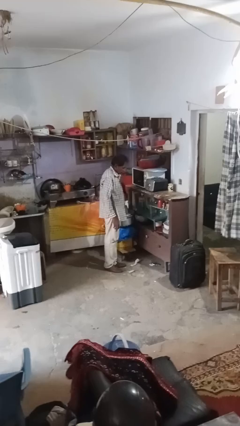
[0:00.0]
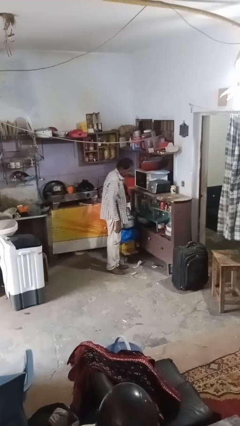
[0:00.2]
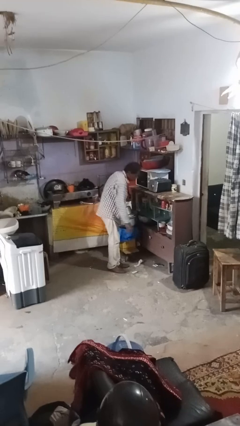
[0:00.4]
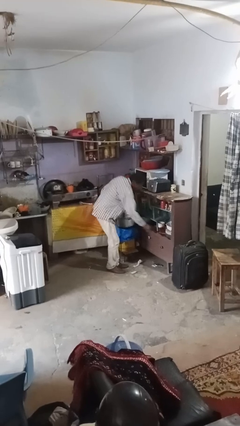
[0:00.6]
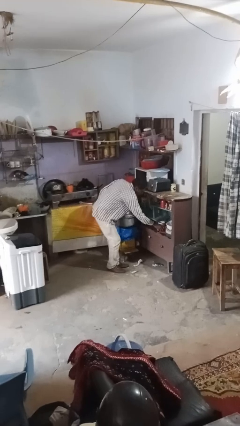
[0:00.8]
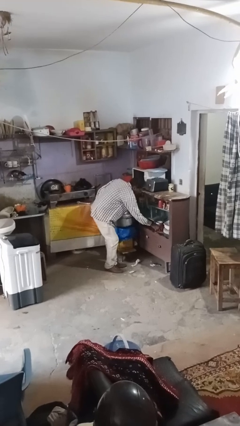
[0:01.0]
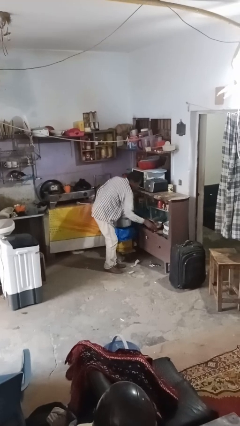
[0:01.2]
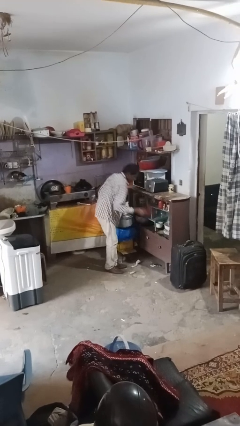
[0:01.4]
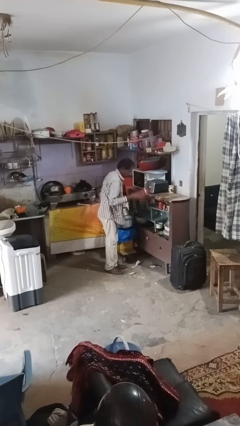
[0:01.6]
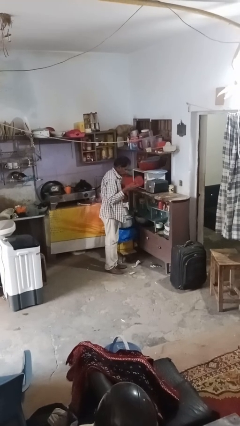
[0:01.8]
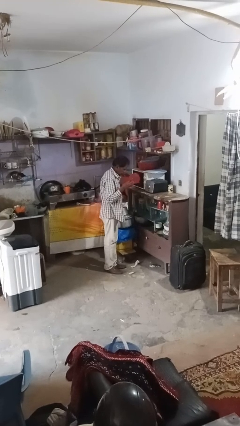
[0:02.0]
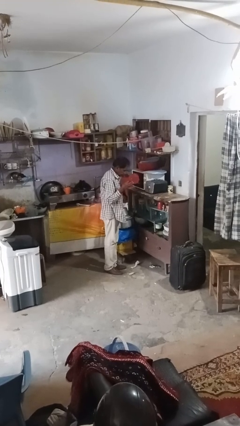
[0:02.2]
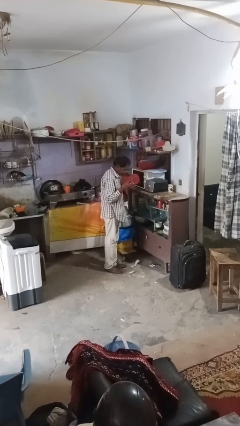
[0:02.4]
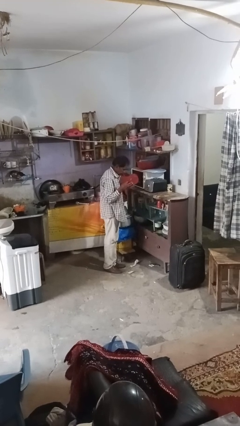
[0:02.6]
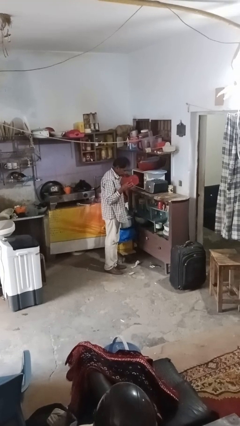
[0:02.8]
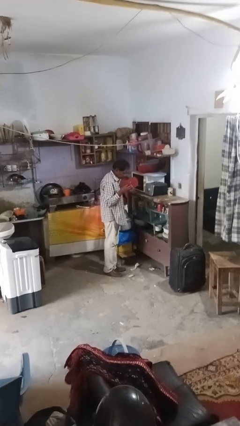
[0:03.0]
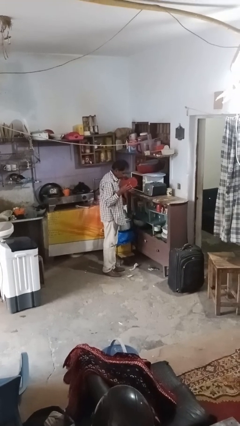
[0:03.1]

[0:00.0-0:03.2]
person takes object from kitchen drawer

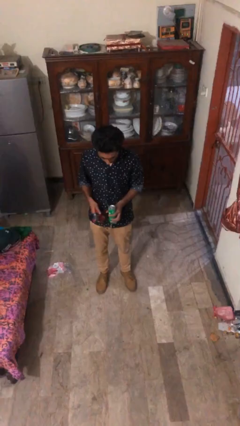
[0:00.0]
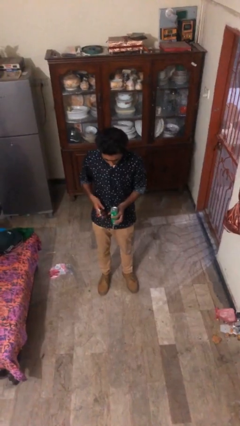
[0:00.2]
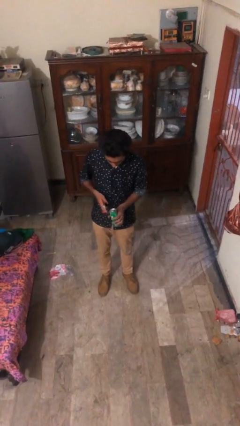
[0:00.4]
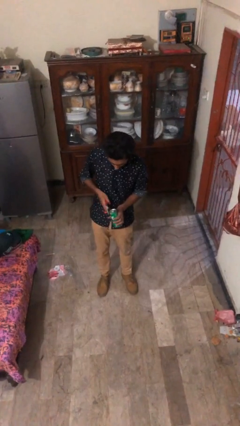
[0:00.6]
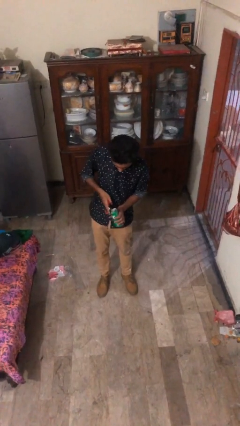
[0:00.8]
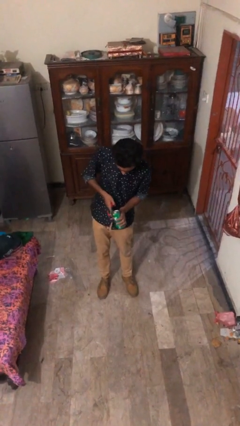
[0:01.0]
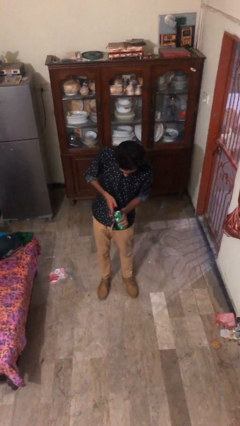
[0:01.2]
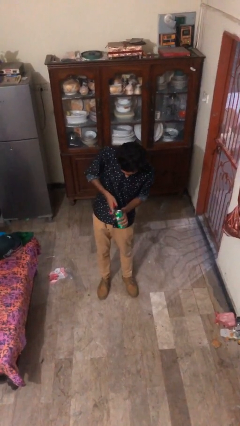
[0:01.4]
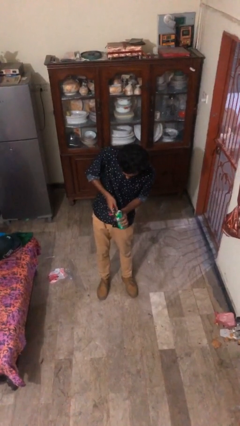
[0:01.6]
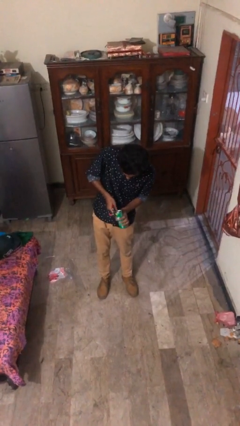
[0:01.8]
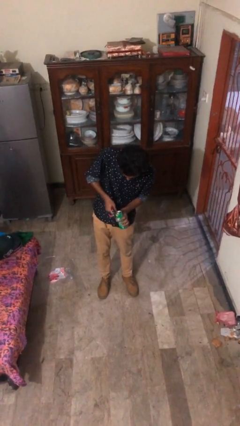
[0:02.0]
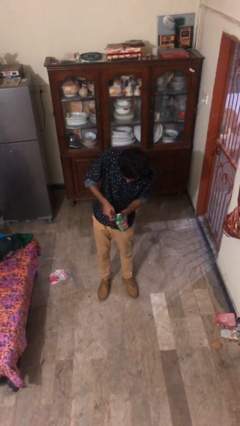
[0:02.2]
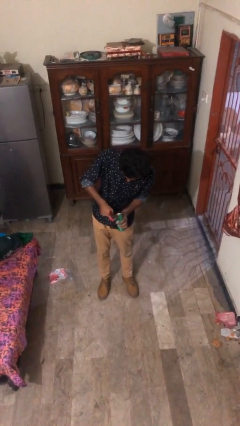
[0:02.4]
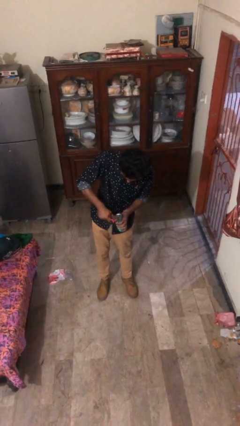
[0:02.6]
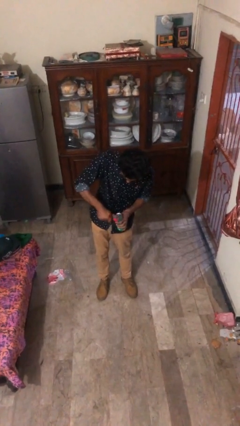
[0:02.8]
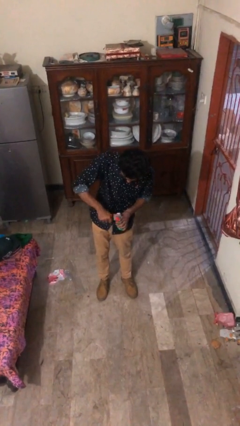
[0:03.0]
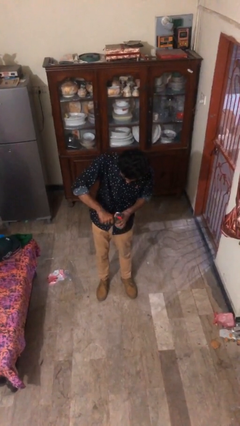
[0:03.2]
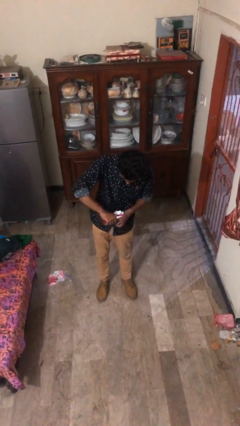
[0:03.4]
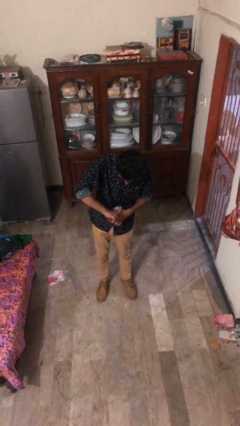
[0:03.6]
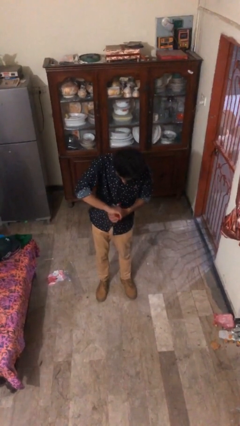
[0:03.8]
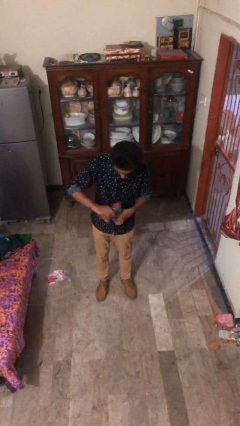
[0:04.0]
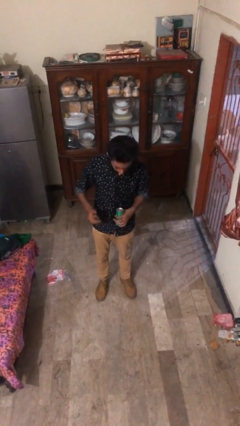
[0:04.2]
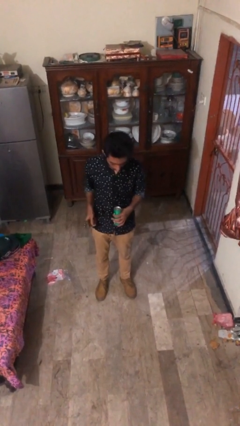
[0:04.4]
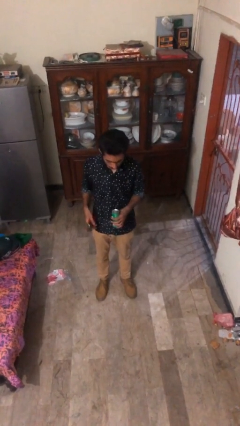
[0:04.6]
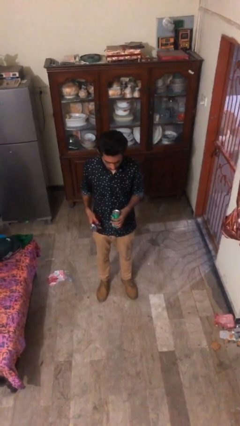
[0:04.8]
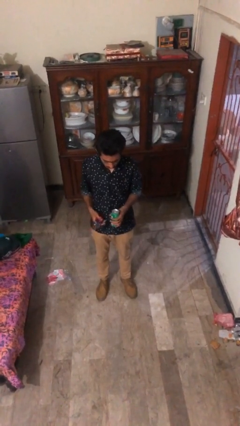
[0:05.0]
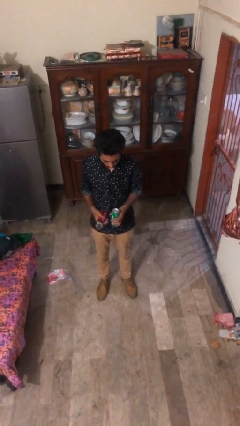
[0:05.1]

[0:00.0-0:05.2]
person opens can with can opener

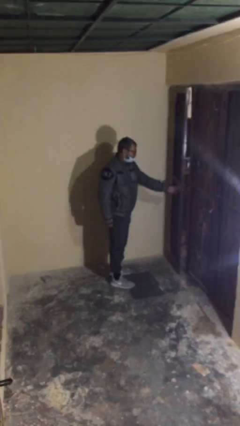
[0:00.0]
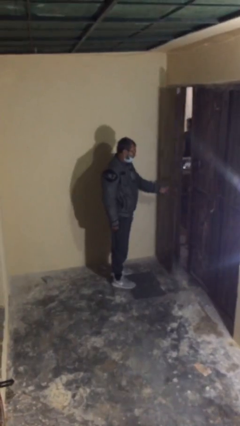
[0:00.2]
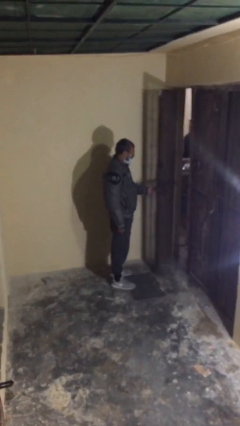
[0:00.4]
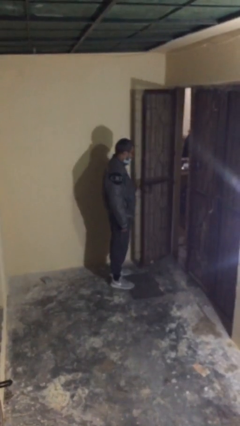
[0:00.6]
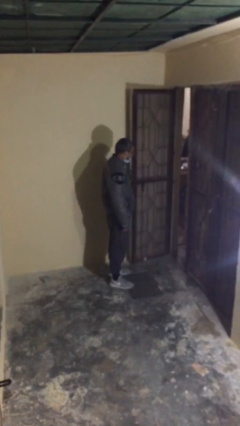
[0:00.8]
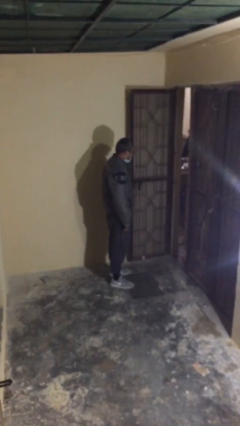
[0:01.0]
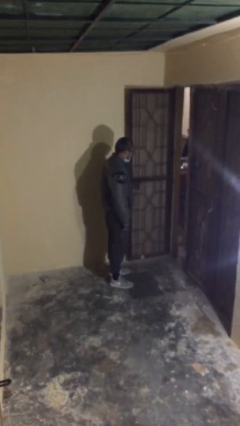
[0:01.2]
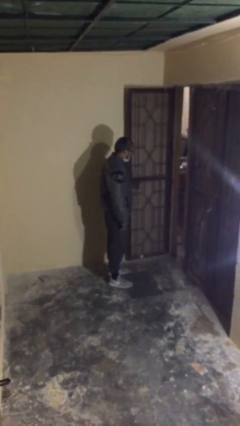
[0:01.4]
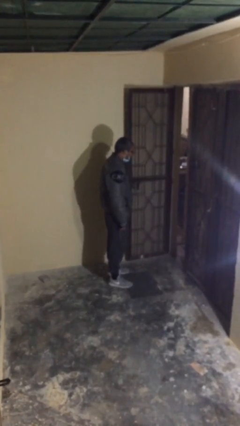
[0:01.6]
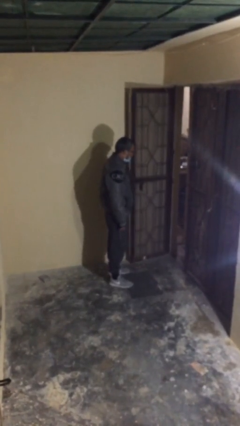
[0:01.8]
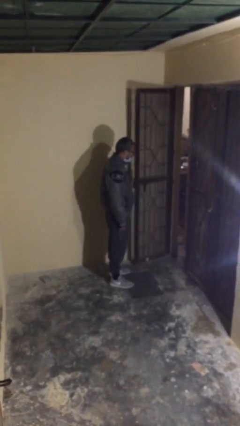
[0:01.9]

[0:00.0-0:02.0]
person opens facility door

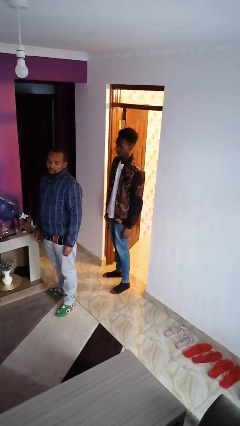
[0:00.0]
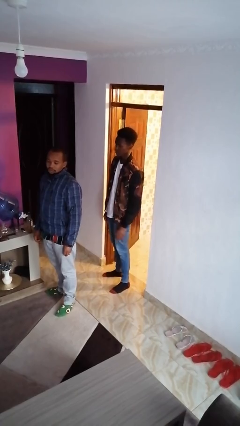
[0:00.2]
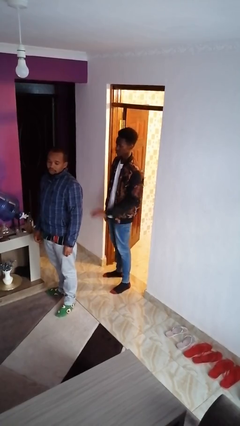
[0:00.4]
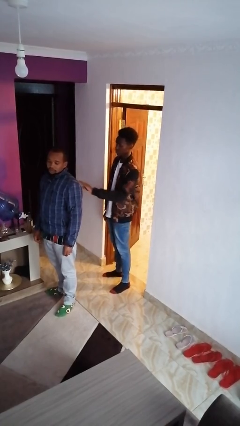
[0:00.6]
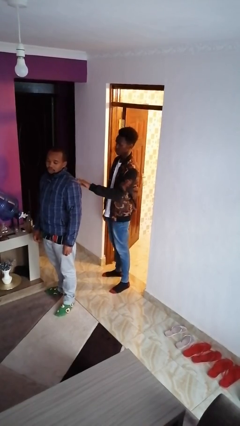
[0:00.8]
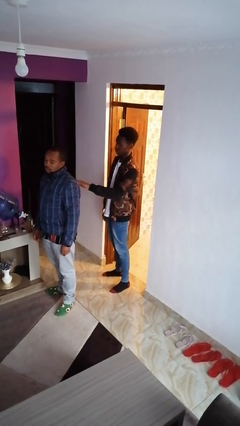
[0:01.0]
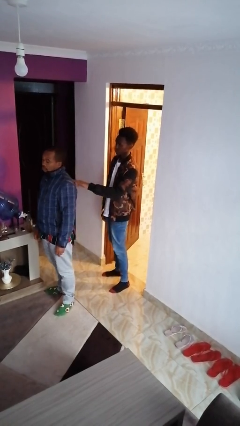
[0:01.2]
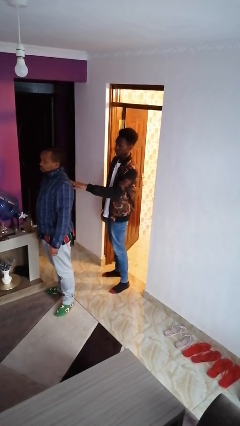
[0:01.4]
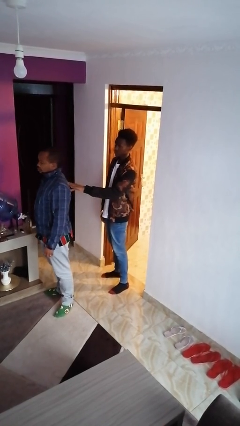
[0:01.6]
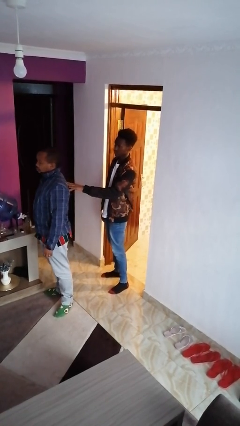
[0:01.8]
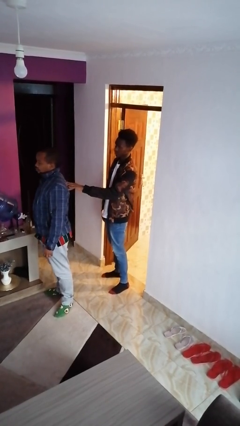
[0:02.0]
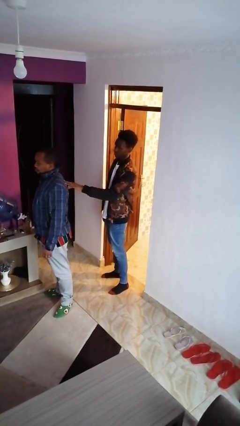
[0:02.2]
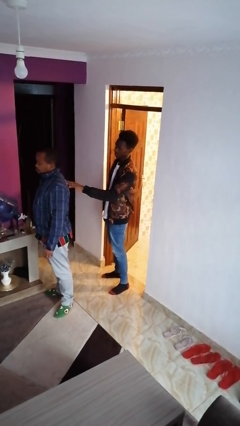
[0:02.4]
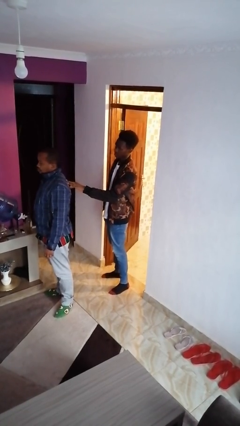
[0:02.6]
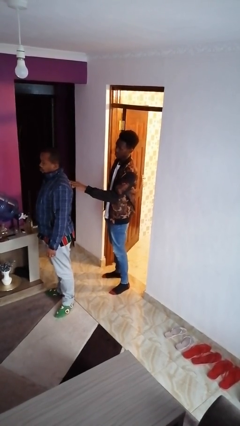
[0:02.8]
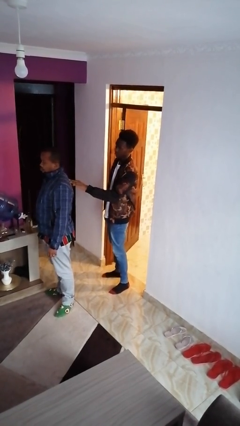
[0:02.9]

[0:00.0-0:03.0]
person touches back of person

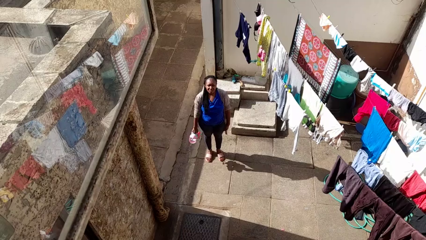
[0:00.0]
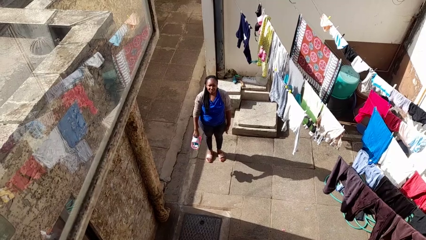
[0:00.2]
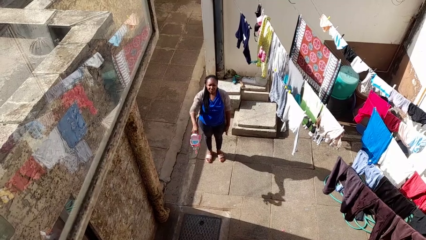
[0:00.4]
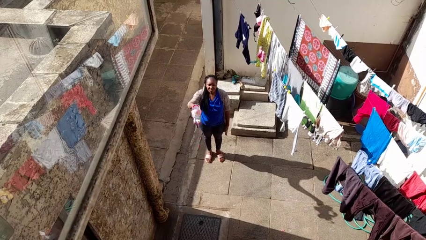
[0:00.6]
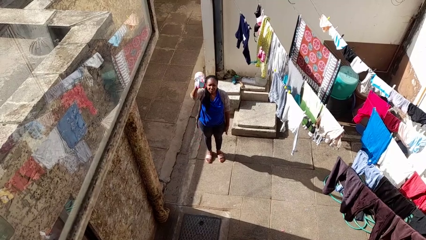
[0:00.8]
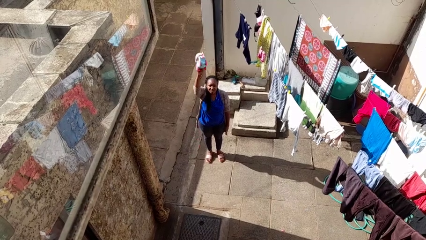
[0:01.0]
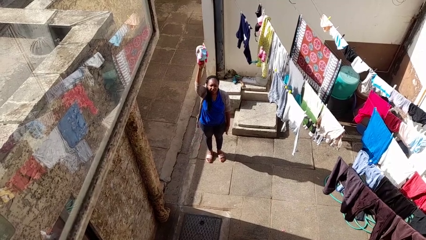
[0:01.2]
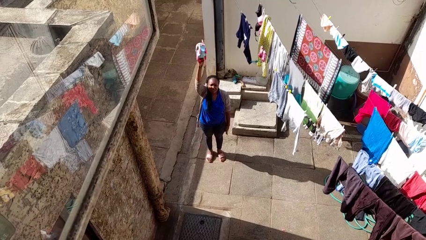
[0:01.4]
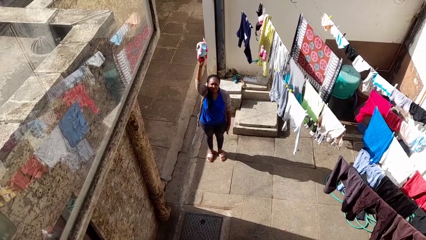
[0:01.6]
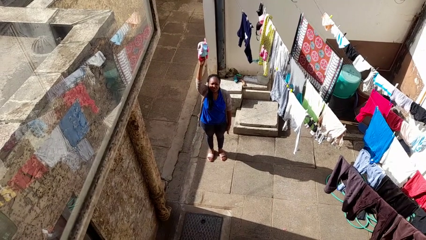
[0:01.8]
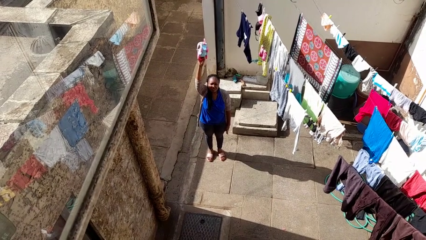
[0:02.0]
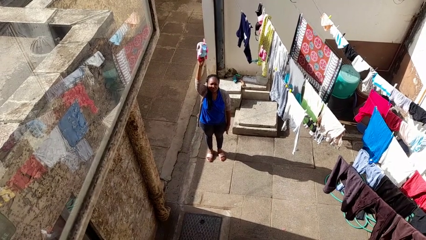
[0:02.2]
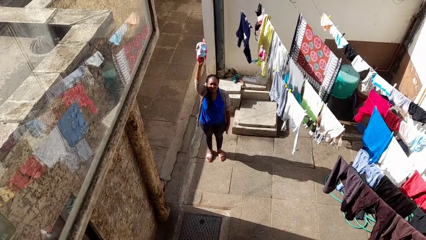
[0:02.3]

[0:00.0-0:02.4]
person holds object above head

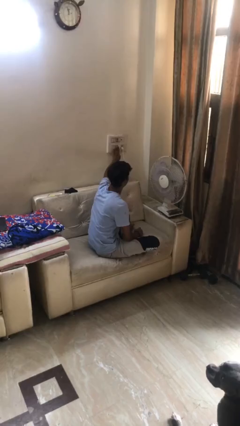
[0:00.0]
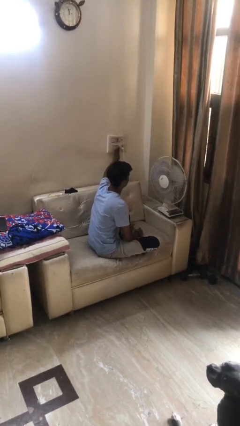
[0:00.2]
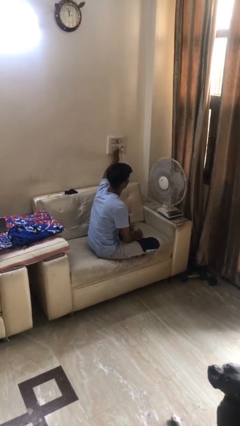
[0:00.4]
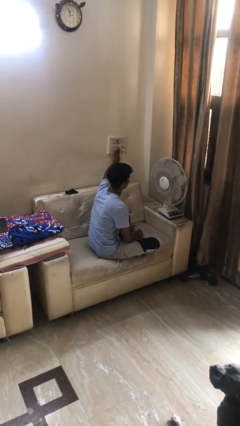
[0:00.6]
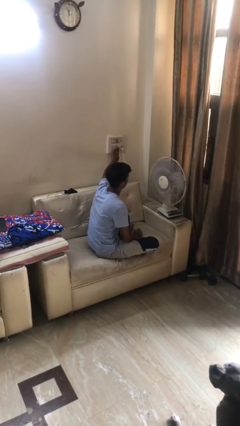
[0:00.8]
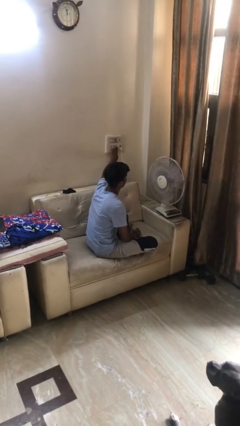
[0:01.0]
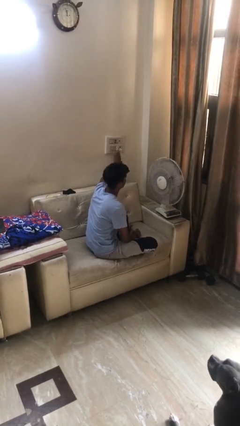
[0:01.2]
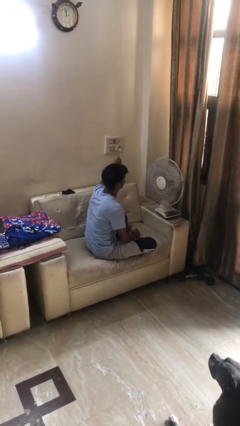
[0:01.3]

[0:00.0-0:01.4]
person turns on fan

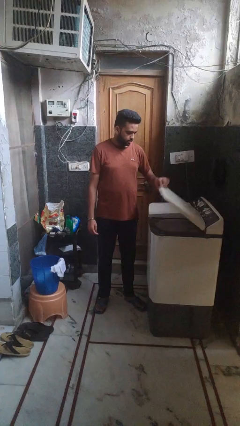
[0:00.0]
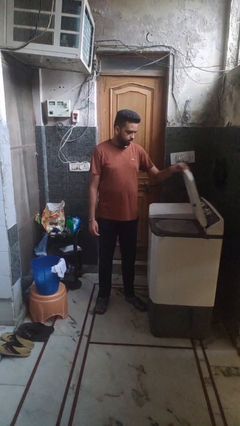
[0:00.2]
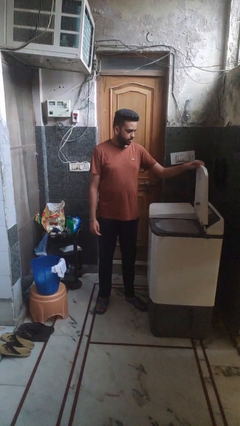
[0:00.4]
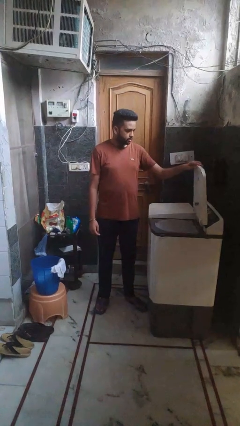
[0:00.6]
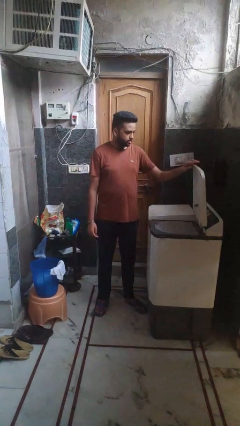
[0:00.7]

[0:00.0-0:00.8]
person opens clothes washer
